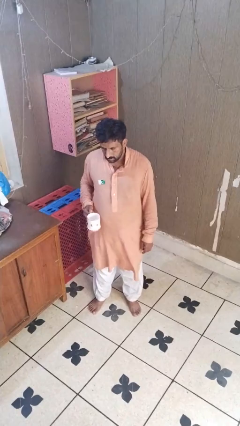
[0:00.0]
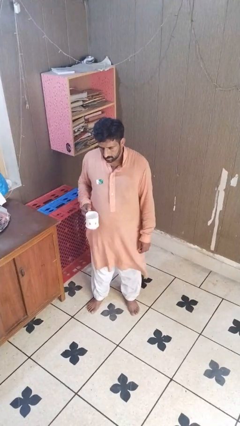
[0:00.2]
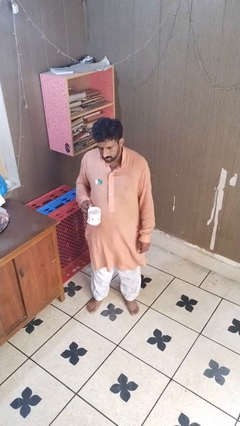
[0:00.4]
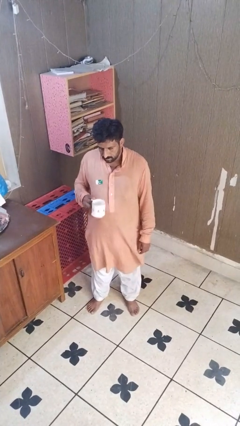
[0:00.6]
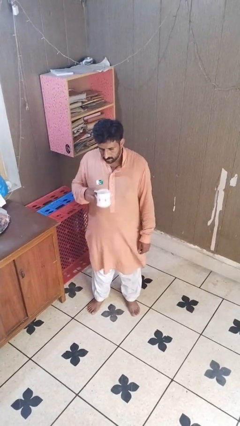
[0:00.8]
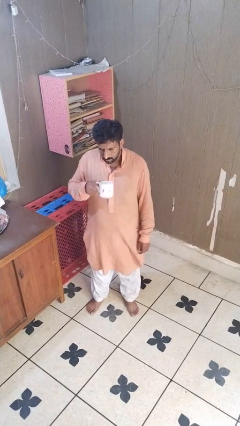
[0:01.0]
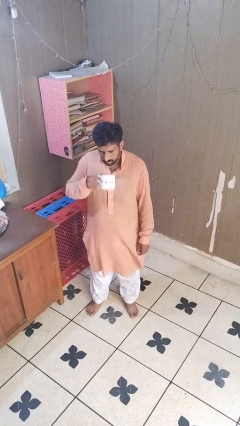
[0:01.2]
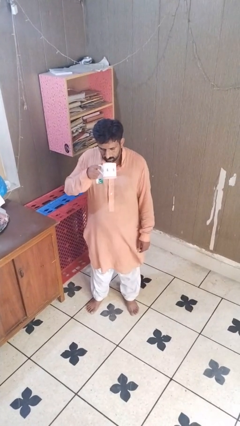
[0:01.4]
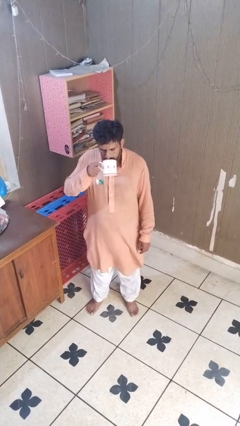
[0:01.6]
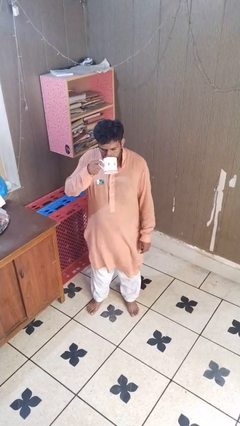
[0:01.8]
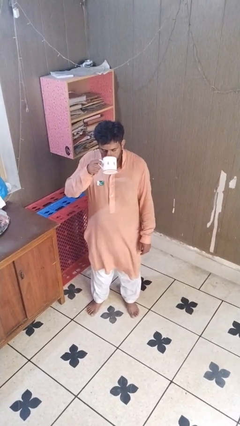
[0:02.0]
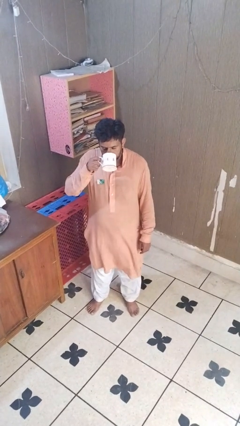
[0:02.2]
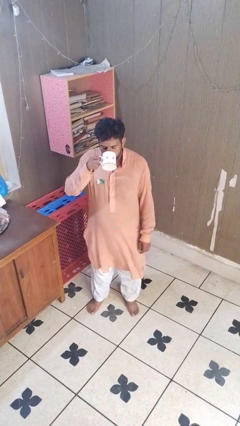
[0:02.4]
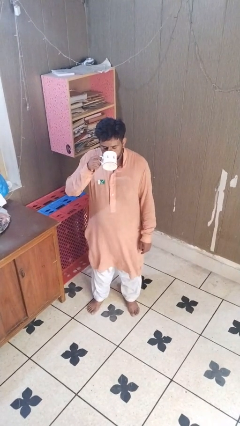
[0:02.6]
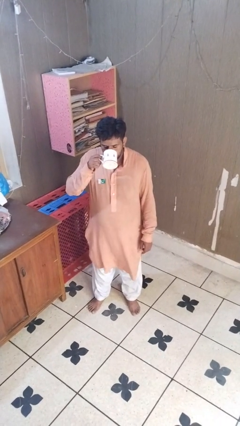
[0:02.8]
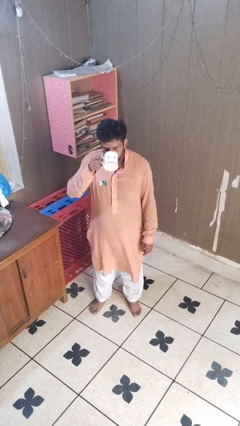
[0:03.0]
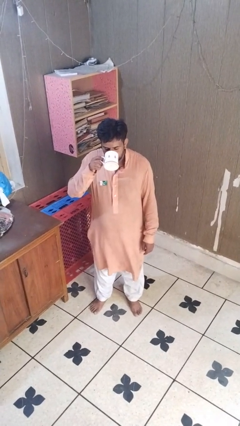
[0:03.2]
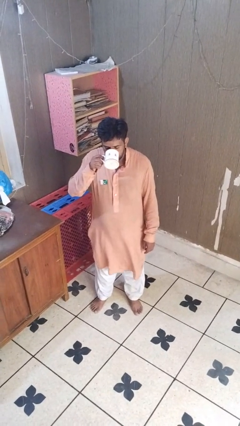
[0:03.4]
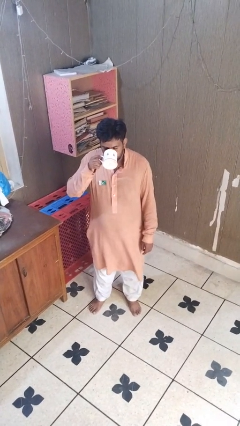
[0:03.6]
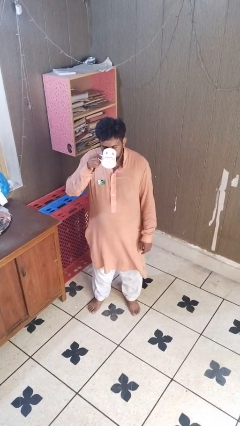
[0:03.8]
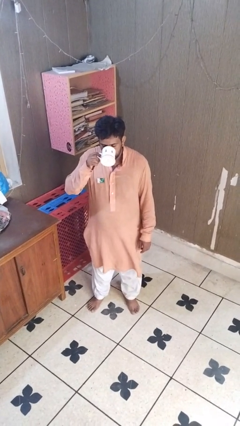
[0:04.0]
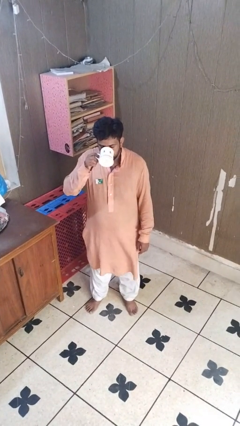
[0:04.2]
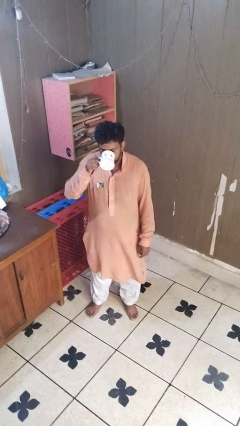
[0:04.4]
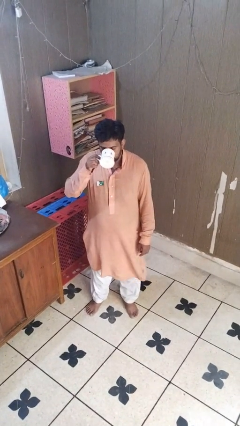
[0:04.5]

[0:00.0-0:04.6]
person drinks from mug

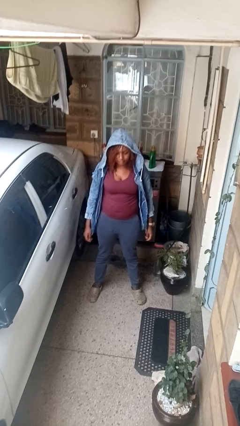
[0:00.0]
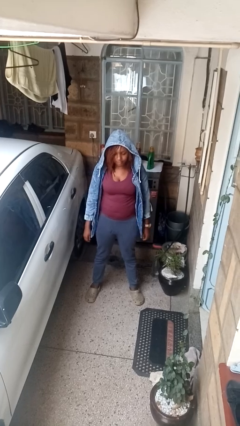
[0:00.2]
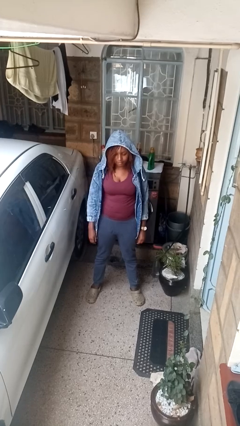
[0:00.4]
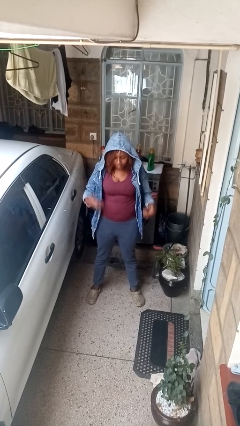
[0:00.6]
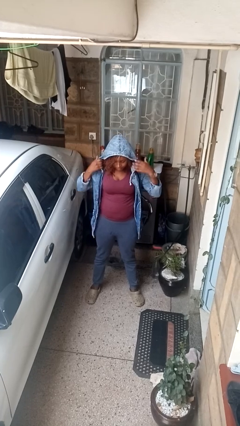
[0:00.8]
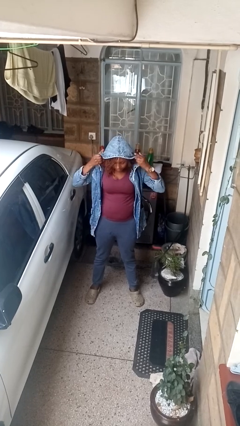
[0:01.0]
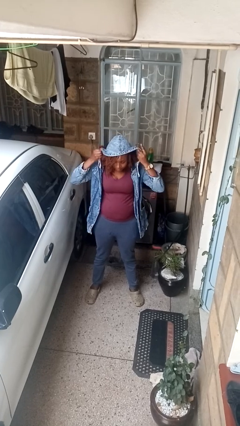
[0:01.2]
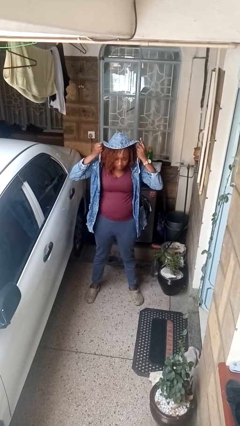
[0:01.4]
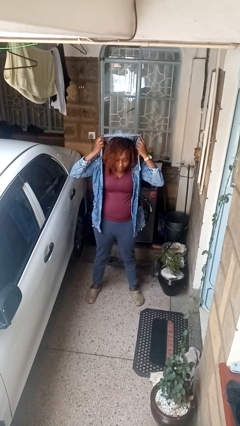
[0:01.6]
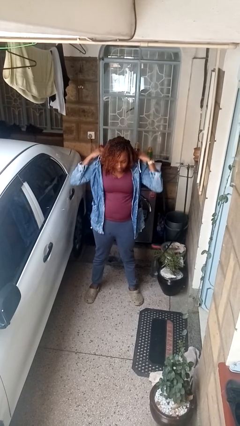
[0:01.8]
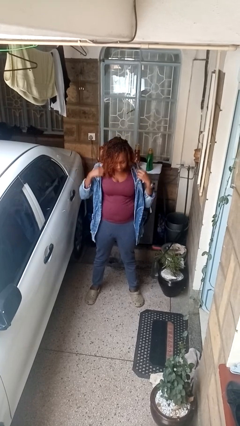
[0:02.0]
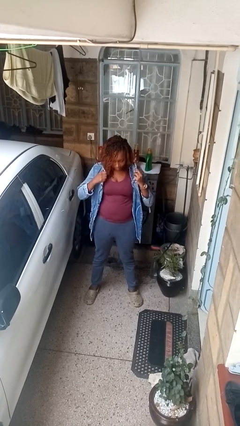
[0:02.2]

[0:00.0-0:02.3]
person takes off hoodie

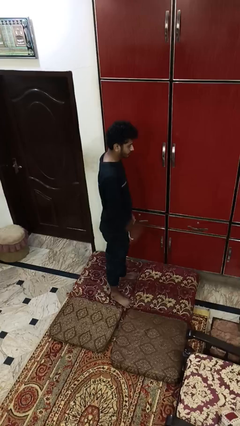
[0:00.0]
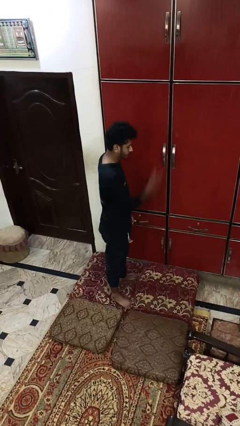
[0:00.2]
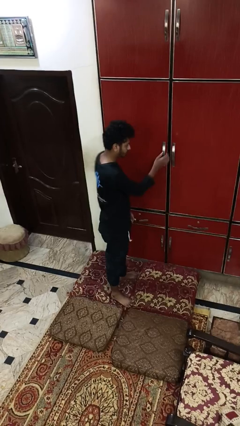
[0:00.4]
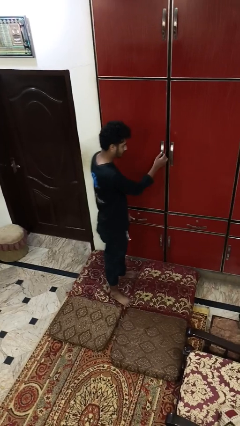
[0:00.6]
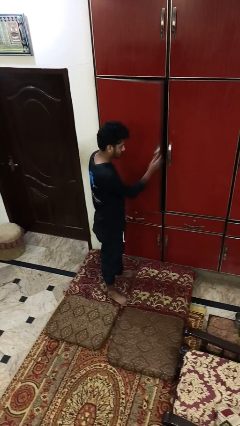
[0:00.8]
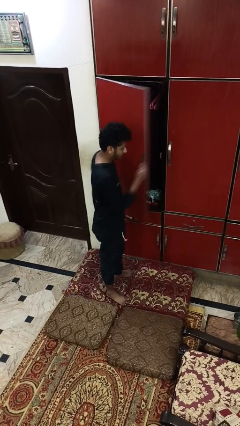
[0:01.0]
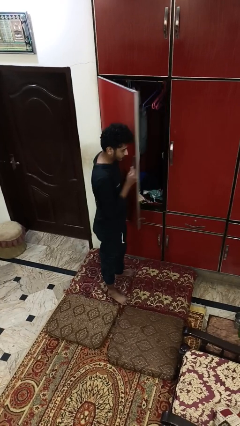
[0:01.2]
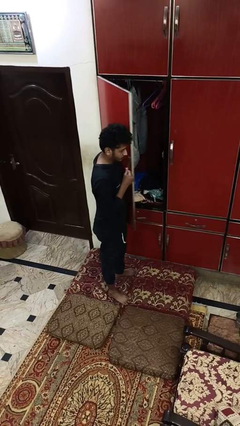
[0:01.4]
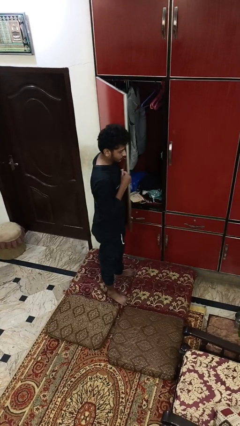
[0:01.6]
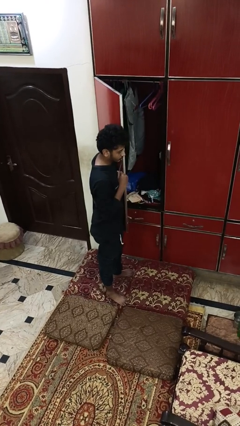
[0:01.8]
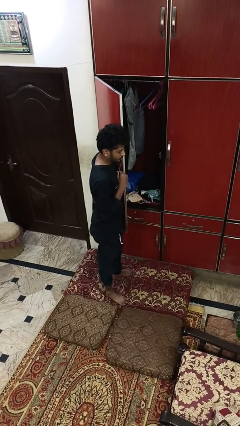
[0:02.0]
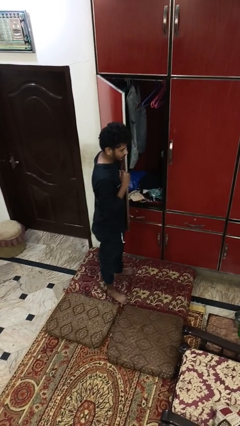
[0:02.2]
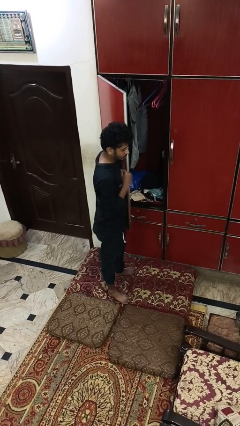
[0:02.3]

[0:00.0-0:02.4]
person opens closet door

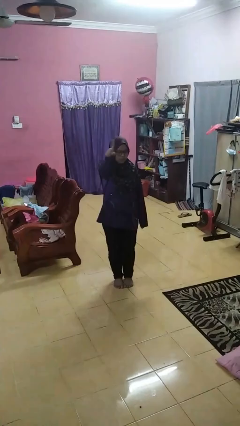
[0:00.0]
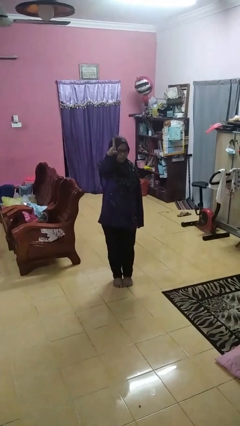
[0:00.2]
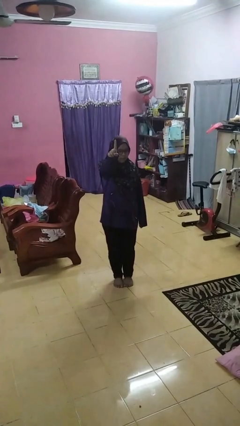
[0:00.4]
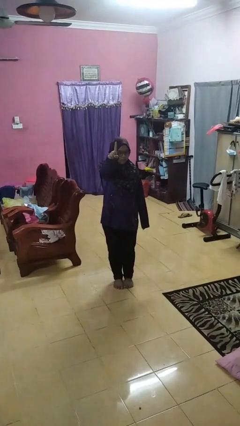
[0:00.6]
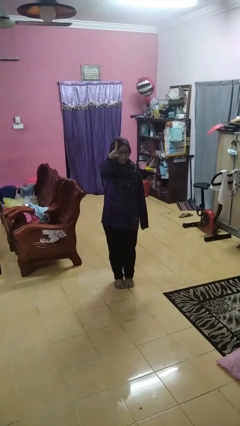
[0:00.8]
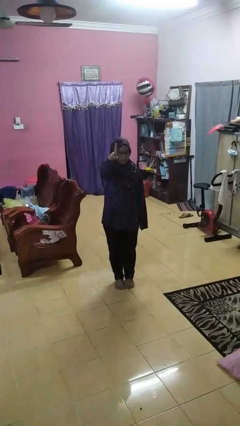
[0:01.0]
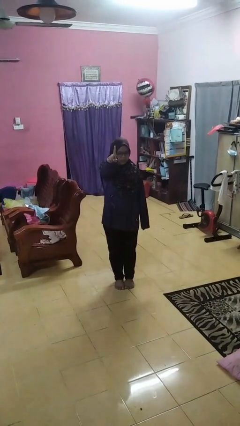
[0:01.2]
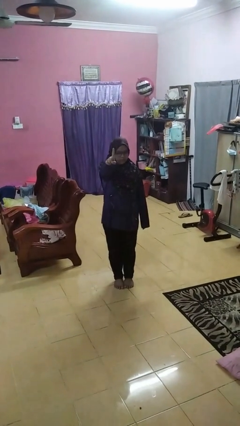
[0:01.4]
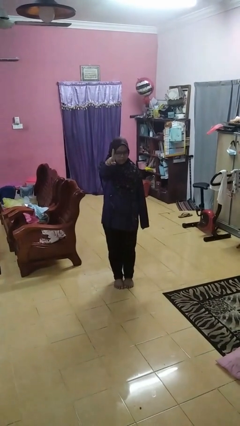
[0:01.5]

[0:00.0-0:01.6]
person gestures number one

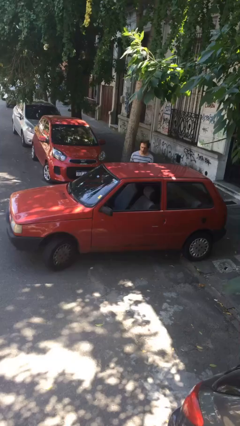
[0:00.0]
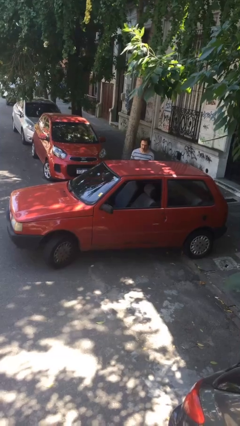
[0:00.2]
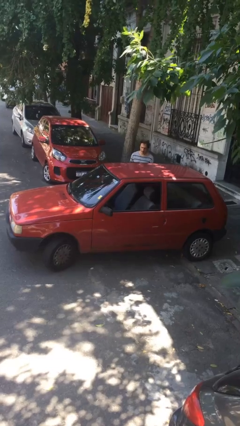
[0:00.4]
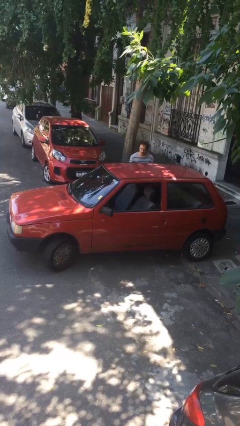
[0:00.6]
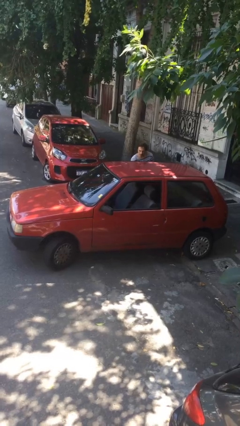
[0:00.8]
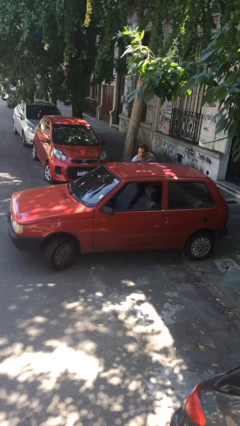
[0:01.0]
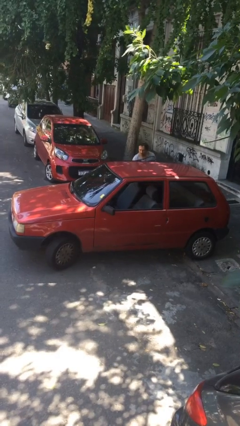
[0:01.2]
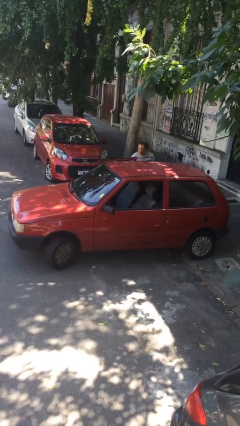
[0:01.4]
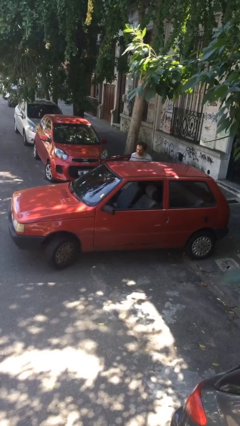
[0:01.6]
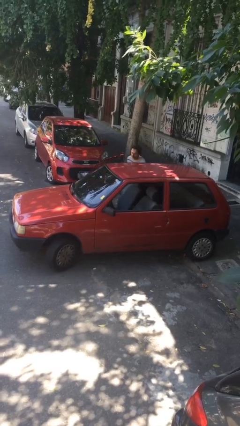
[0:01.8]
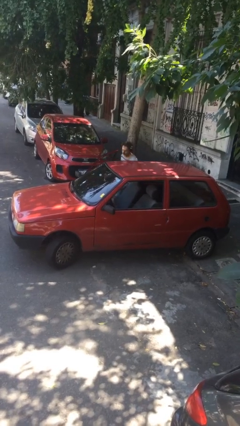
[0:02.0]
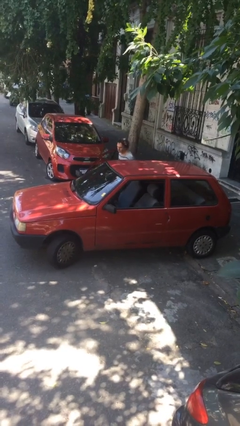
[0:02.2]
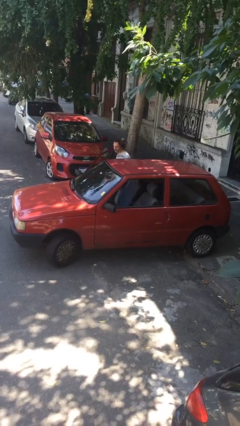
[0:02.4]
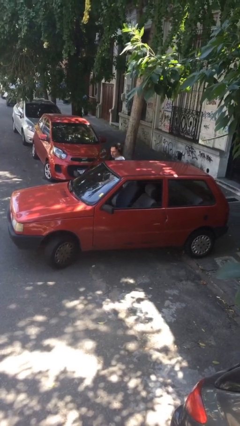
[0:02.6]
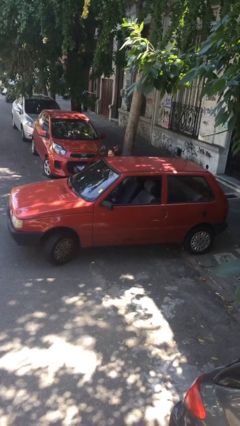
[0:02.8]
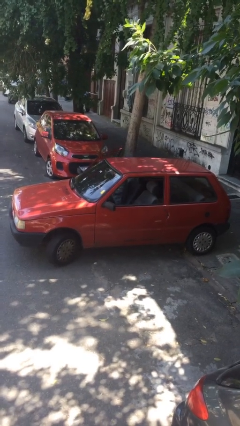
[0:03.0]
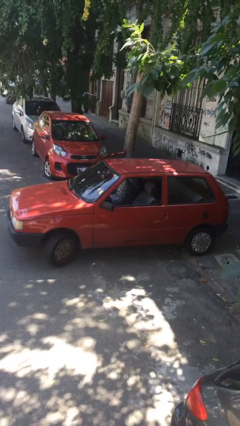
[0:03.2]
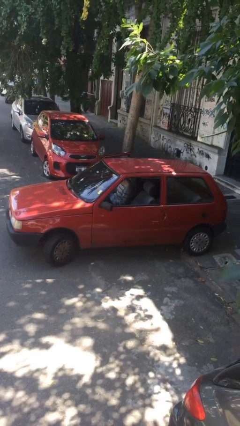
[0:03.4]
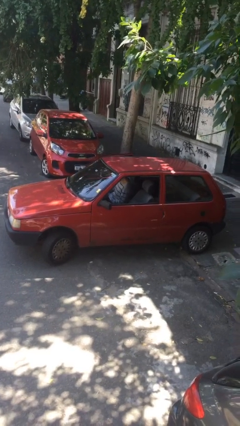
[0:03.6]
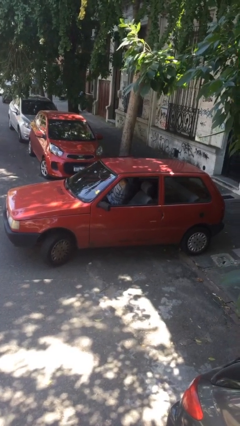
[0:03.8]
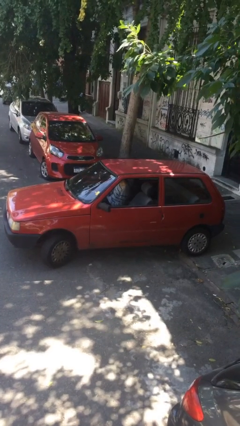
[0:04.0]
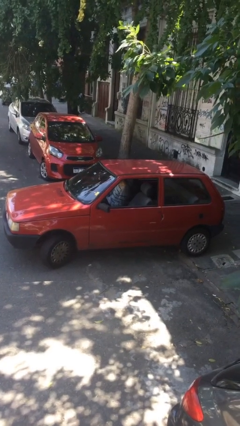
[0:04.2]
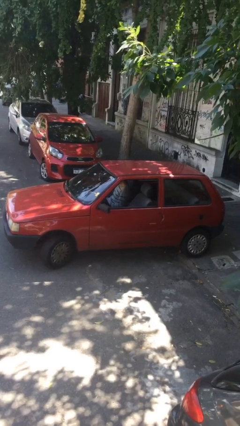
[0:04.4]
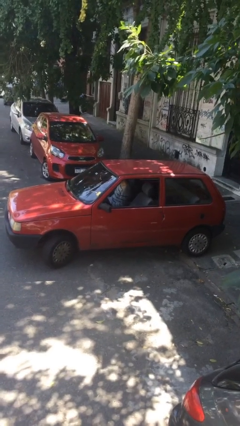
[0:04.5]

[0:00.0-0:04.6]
car picks up person

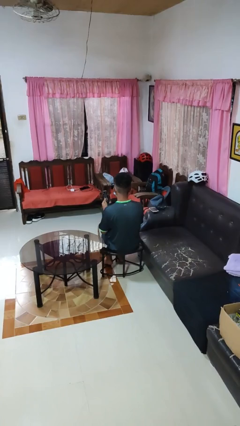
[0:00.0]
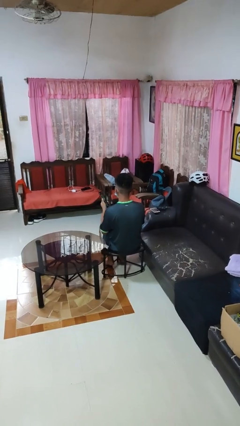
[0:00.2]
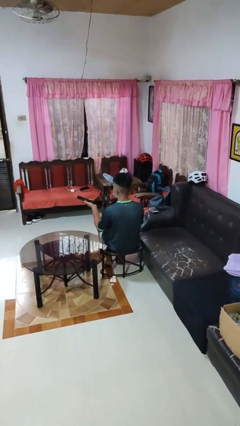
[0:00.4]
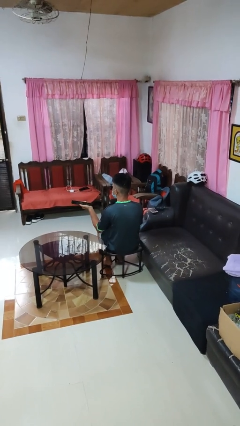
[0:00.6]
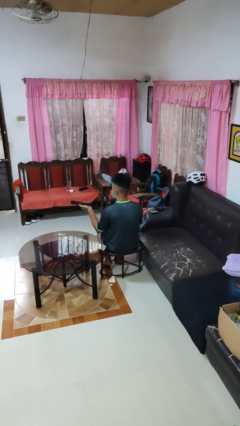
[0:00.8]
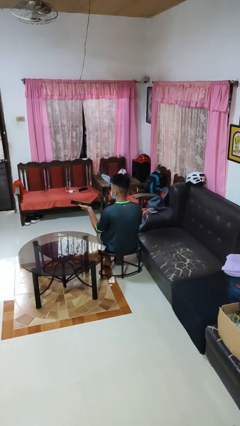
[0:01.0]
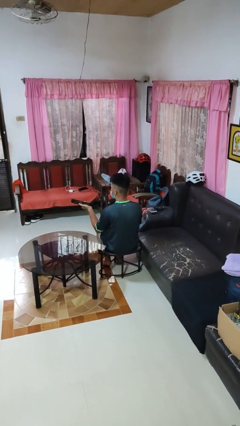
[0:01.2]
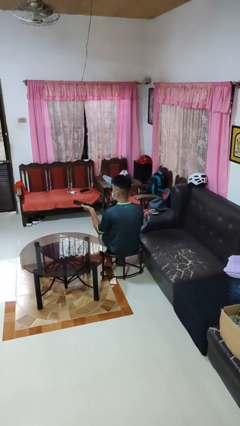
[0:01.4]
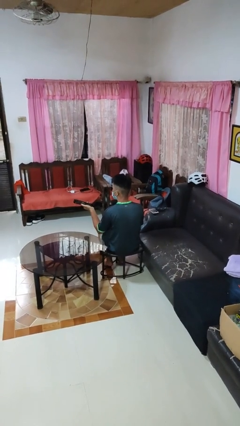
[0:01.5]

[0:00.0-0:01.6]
person uses television remote

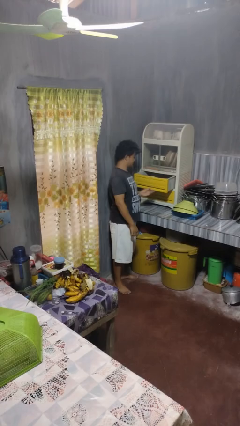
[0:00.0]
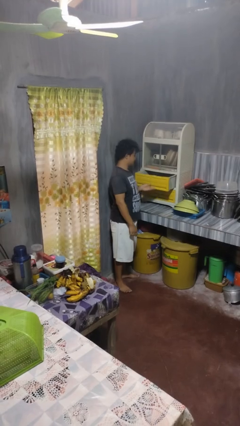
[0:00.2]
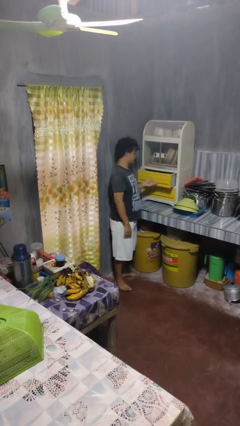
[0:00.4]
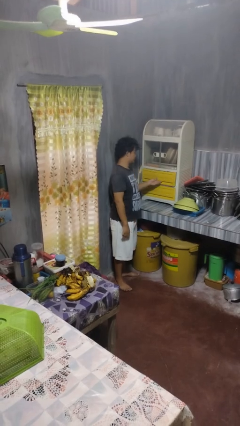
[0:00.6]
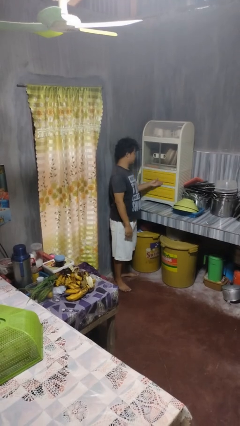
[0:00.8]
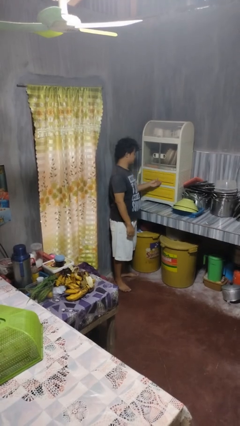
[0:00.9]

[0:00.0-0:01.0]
person closes kitchen drawer
